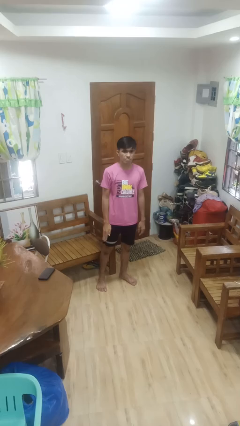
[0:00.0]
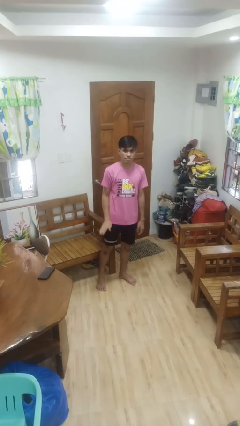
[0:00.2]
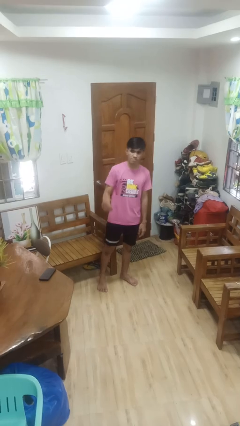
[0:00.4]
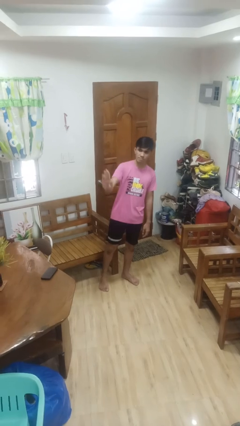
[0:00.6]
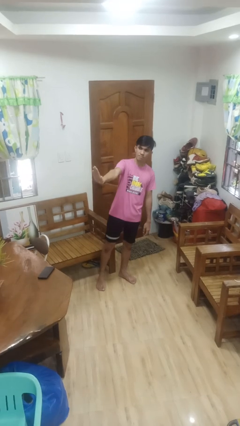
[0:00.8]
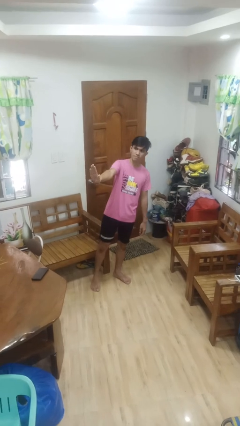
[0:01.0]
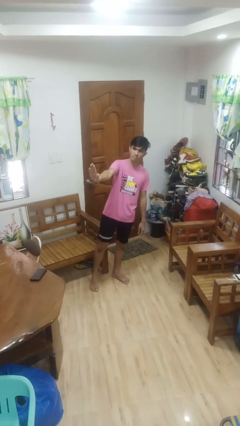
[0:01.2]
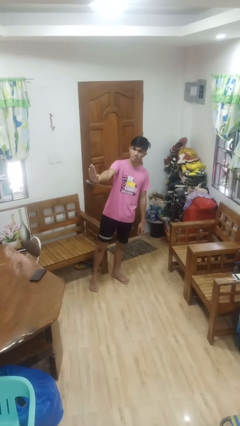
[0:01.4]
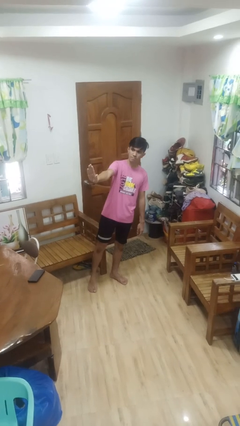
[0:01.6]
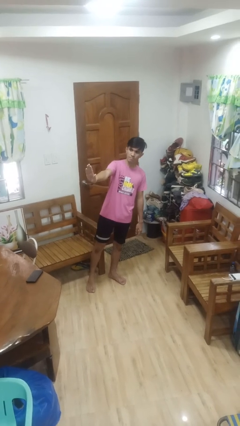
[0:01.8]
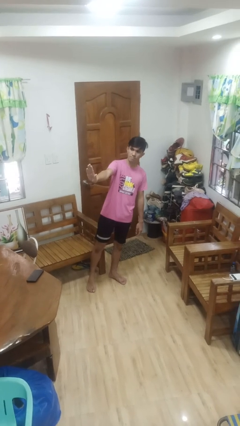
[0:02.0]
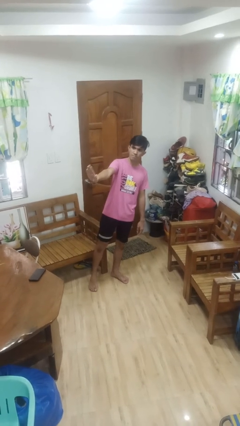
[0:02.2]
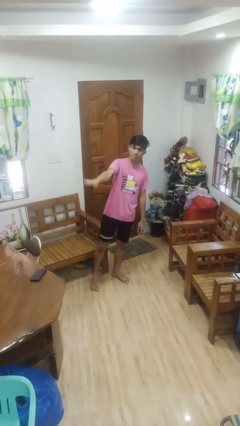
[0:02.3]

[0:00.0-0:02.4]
person gestures stop

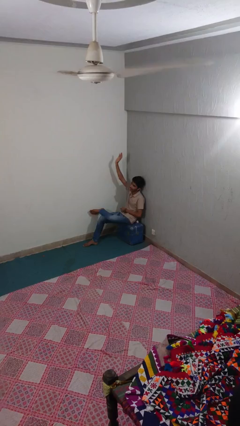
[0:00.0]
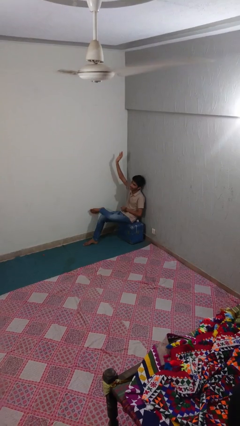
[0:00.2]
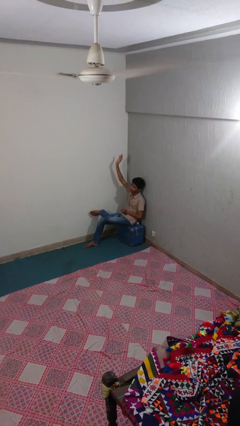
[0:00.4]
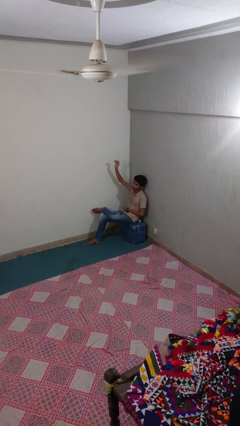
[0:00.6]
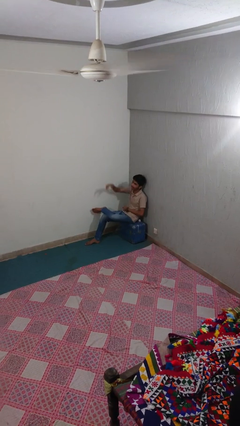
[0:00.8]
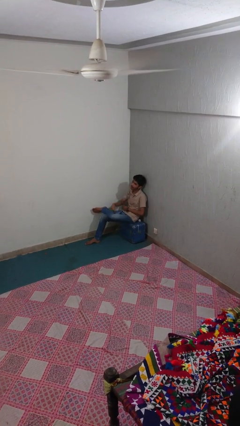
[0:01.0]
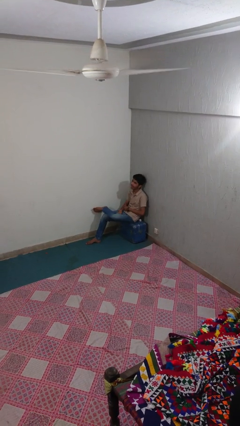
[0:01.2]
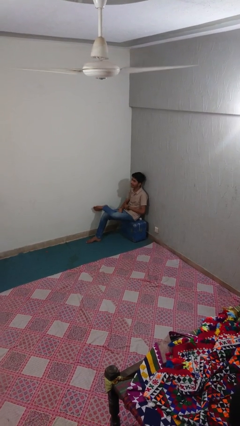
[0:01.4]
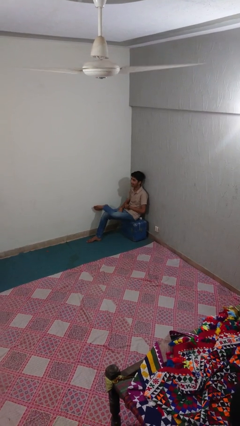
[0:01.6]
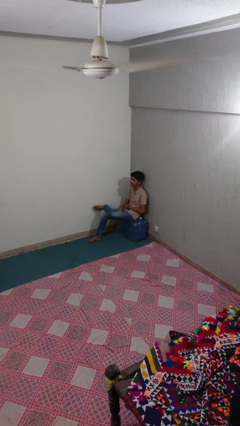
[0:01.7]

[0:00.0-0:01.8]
person gestures lower hand

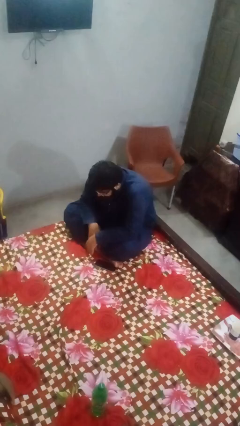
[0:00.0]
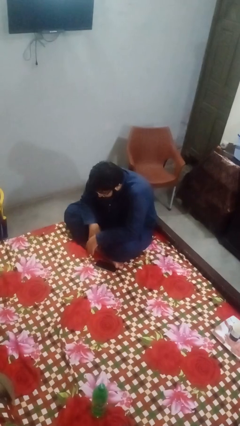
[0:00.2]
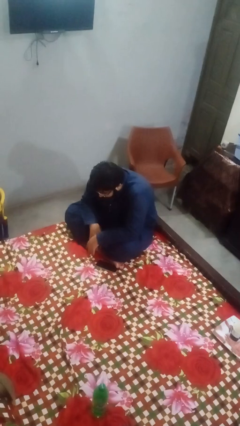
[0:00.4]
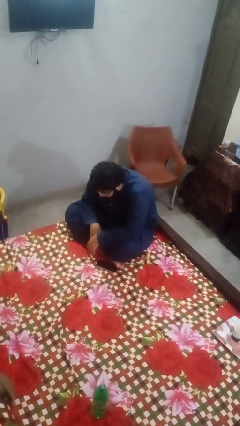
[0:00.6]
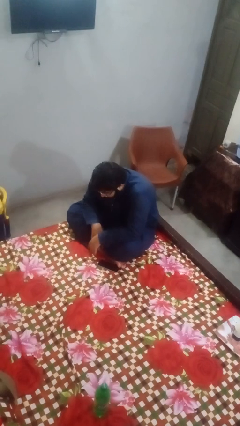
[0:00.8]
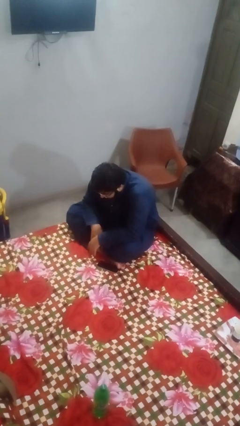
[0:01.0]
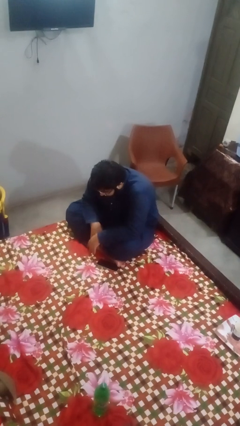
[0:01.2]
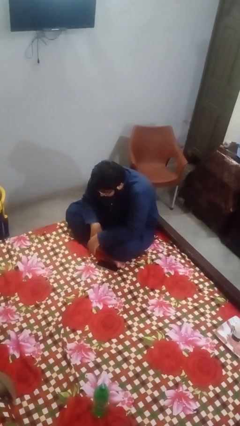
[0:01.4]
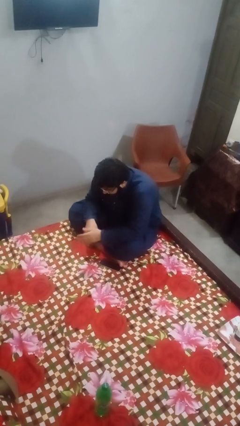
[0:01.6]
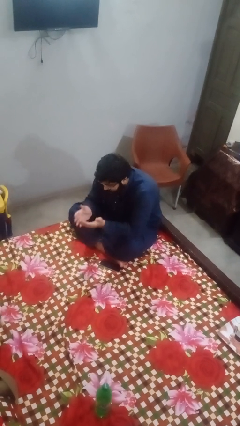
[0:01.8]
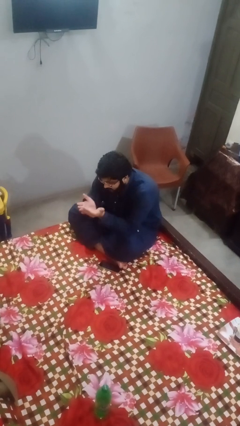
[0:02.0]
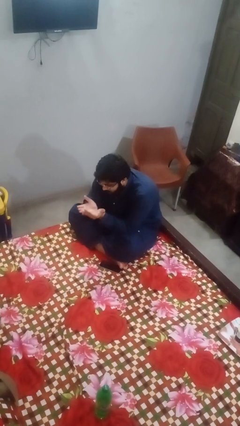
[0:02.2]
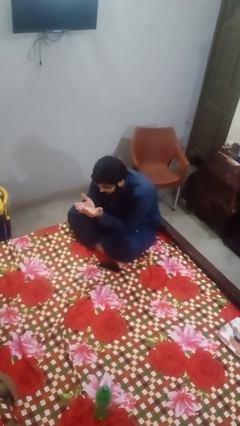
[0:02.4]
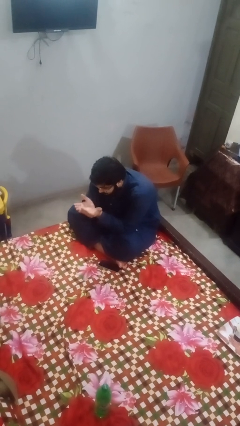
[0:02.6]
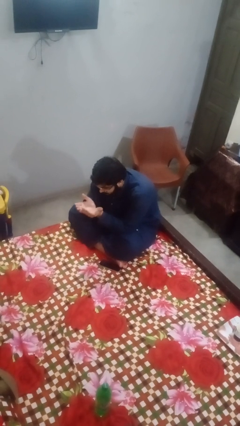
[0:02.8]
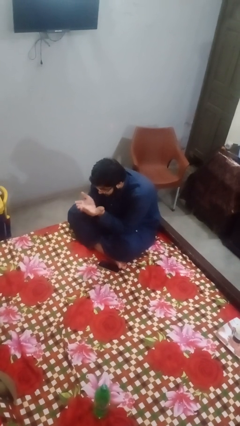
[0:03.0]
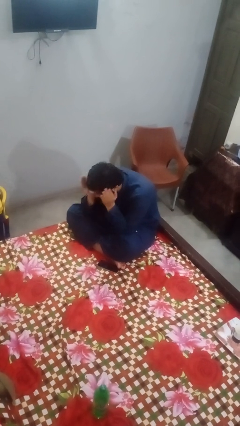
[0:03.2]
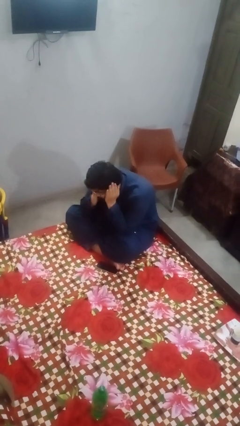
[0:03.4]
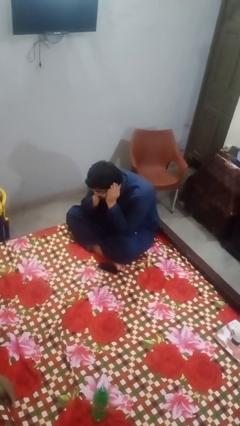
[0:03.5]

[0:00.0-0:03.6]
person prays

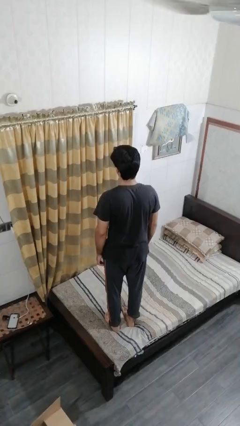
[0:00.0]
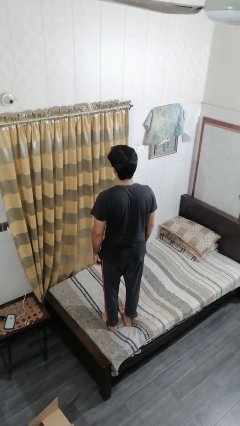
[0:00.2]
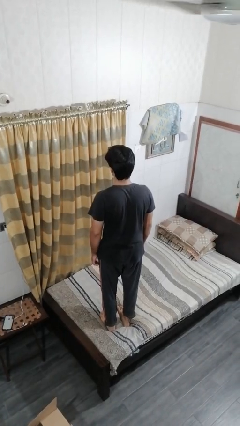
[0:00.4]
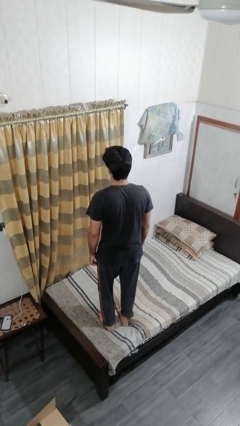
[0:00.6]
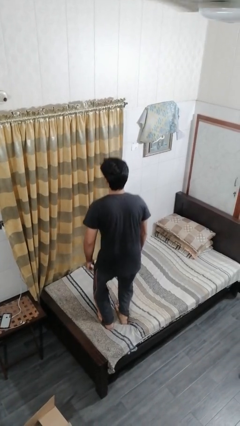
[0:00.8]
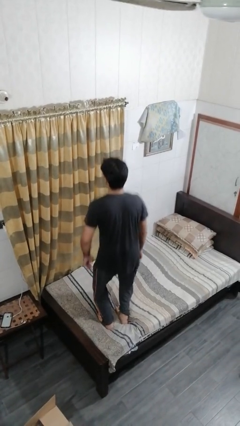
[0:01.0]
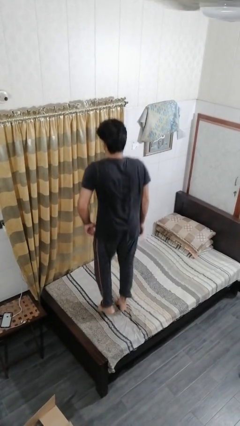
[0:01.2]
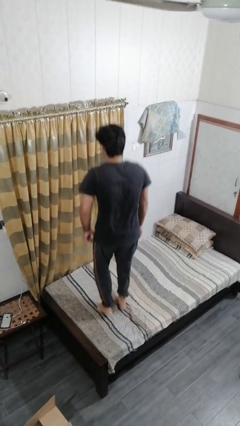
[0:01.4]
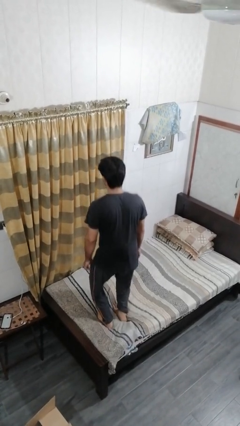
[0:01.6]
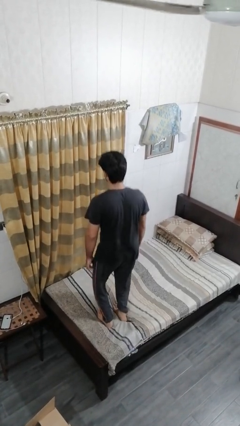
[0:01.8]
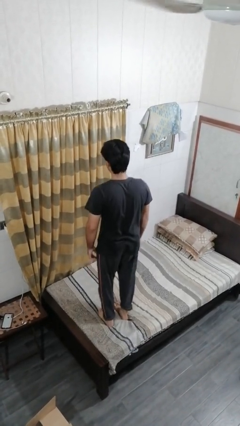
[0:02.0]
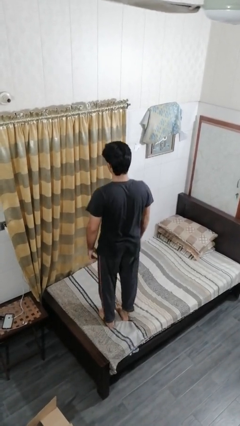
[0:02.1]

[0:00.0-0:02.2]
person jumps on bed

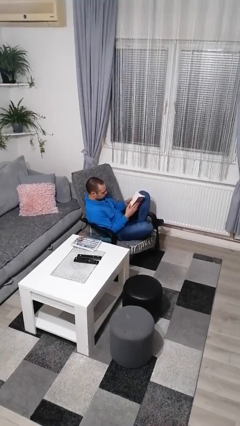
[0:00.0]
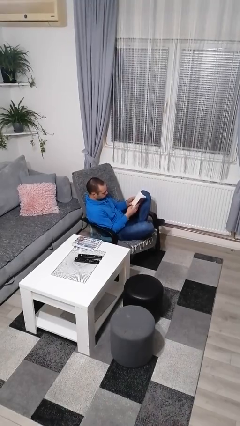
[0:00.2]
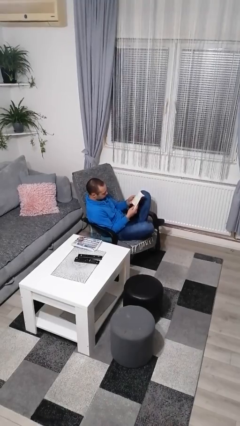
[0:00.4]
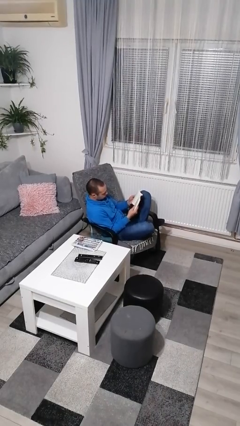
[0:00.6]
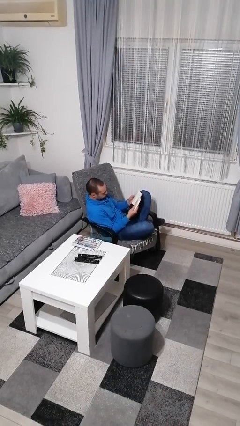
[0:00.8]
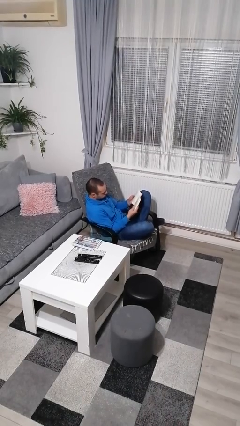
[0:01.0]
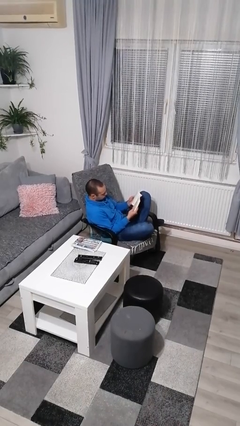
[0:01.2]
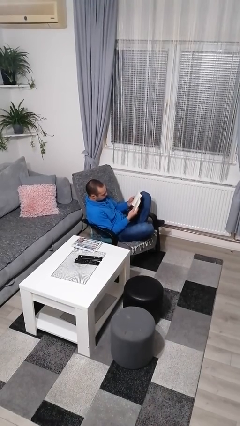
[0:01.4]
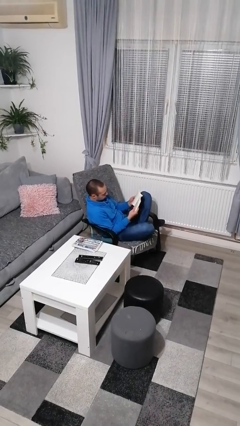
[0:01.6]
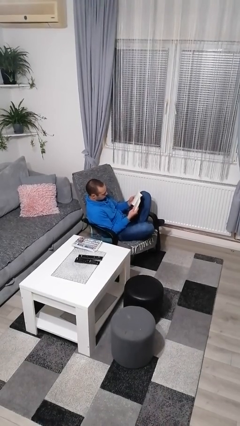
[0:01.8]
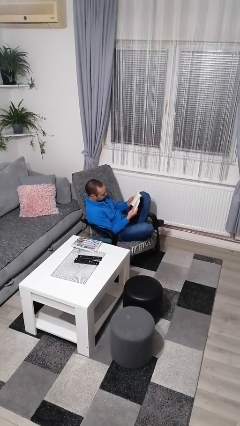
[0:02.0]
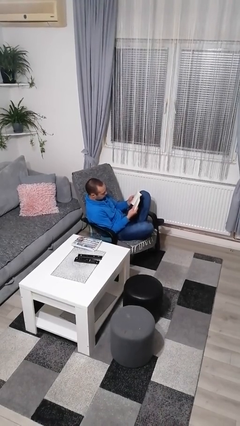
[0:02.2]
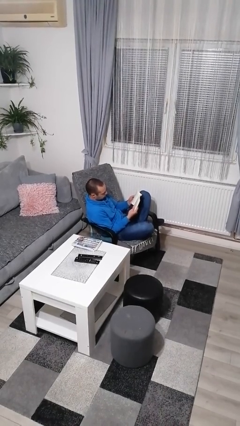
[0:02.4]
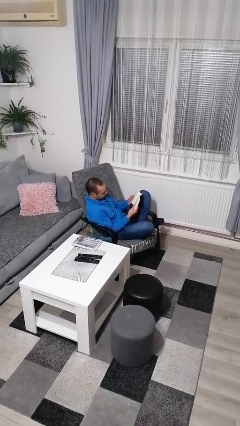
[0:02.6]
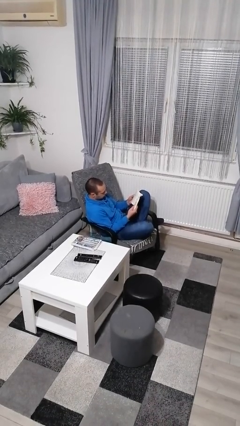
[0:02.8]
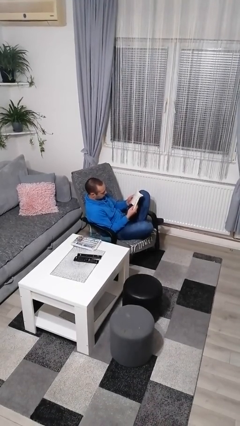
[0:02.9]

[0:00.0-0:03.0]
person reads book

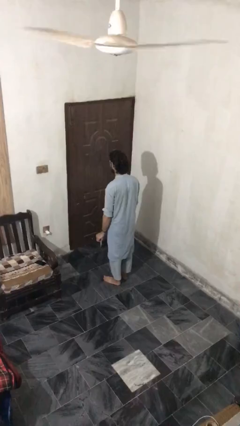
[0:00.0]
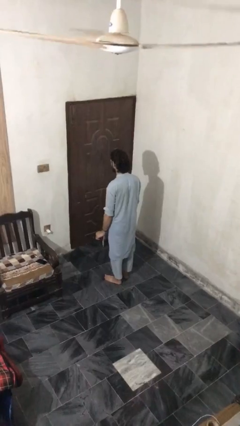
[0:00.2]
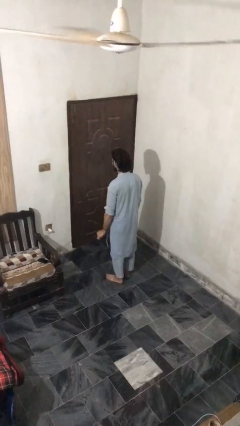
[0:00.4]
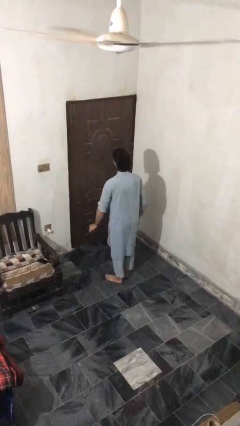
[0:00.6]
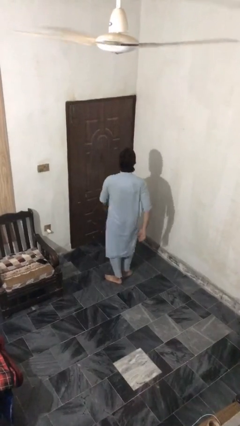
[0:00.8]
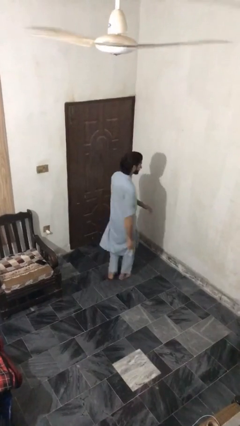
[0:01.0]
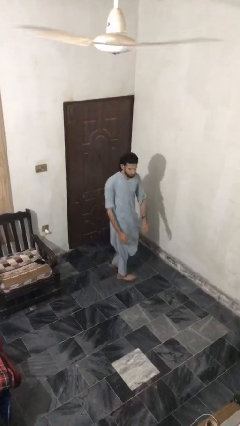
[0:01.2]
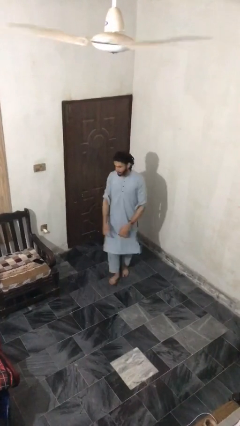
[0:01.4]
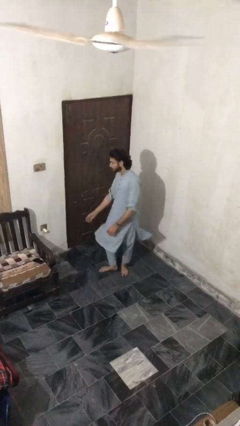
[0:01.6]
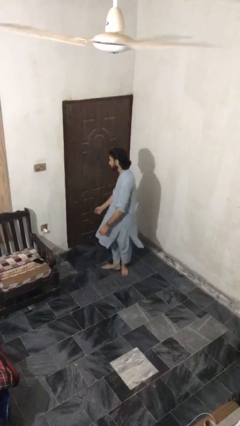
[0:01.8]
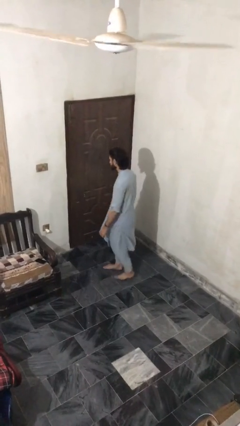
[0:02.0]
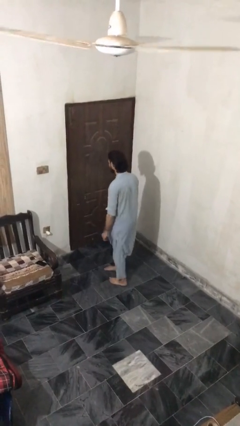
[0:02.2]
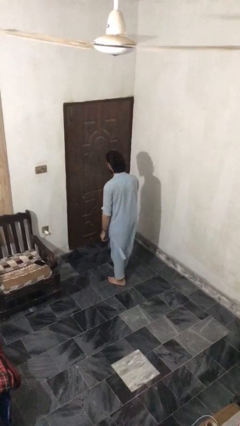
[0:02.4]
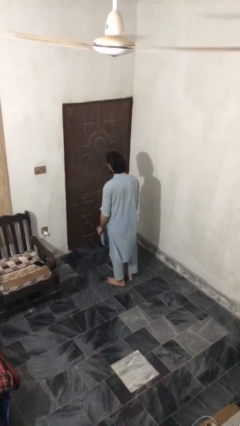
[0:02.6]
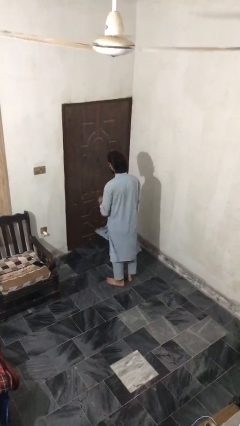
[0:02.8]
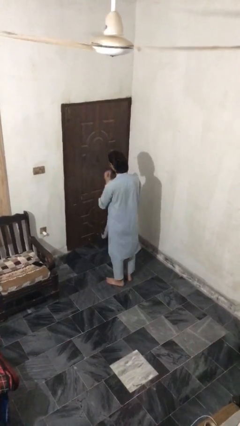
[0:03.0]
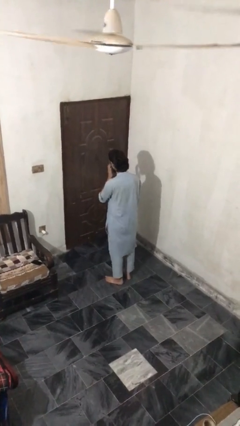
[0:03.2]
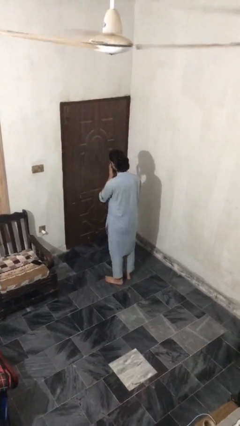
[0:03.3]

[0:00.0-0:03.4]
person twirls

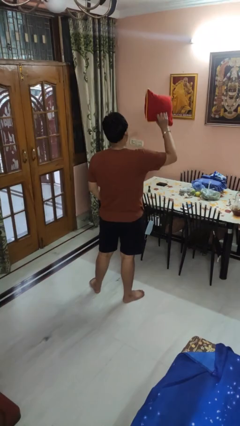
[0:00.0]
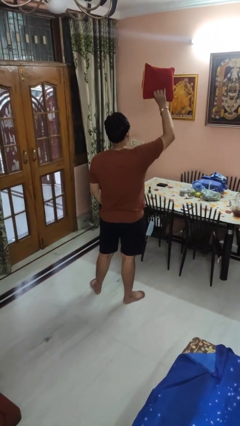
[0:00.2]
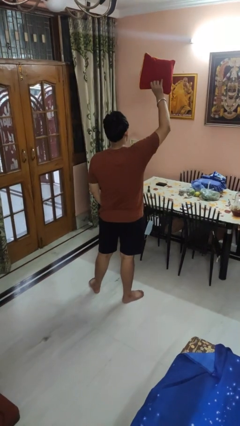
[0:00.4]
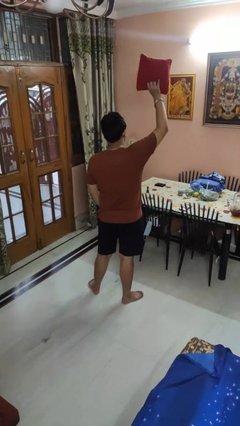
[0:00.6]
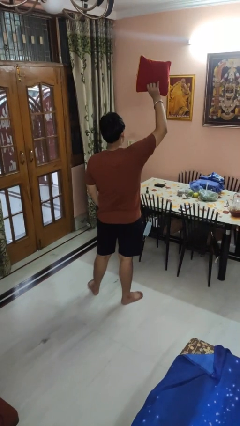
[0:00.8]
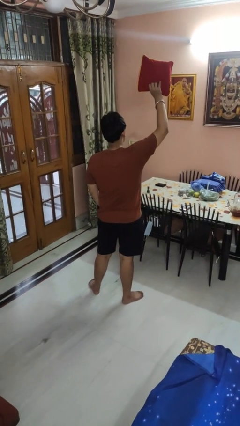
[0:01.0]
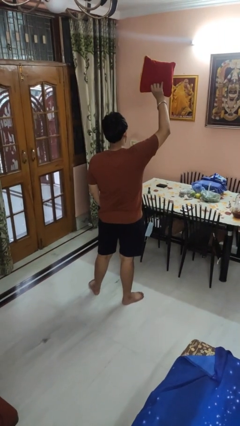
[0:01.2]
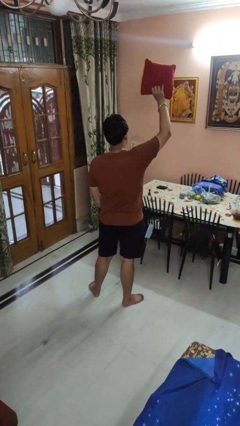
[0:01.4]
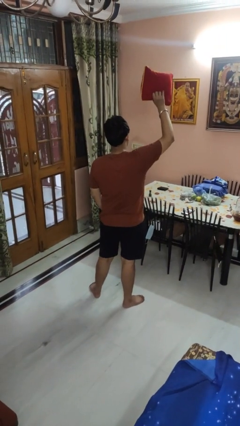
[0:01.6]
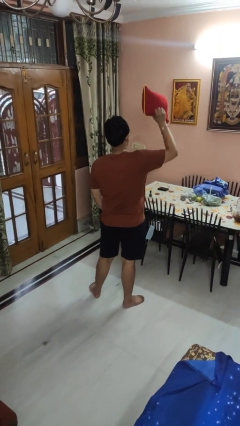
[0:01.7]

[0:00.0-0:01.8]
person holds object above head
